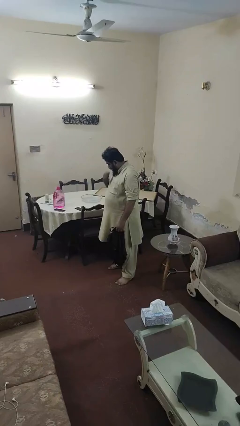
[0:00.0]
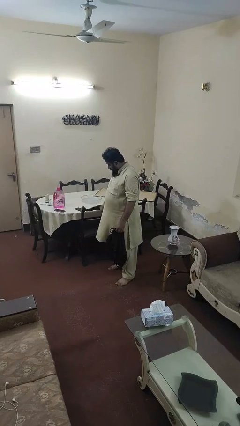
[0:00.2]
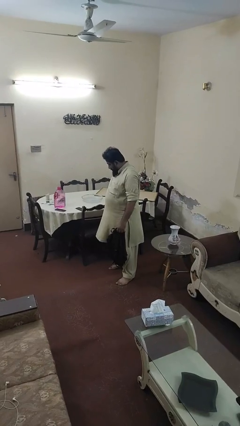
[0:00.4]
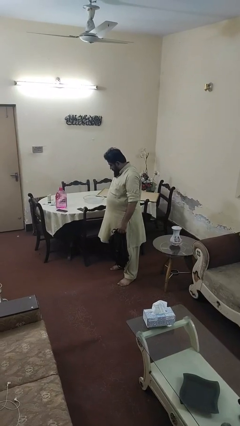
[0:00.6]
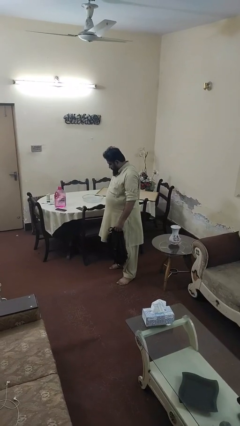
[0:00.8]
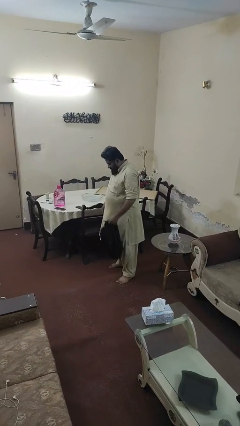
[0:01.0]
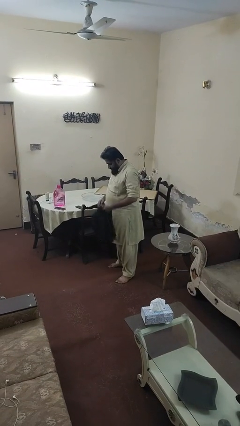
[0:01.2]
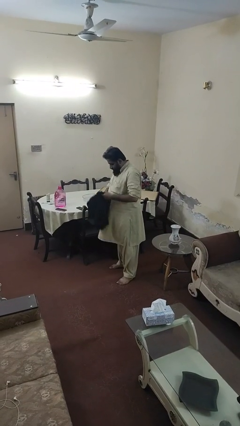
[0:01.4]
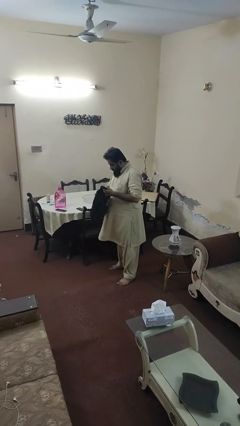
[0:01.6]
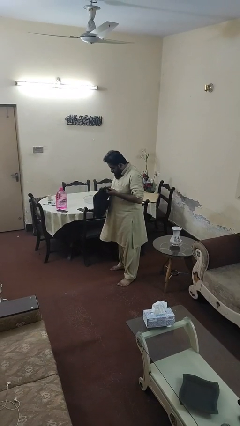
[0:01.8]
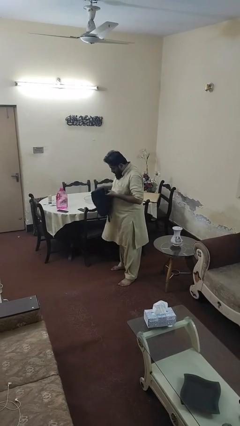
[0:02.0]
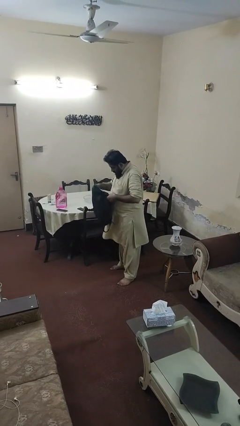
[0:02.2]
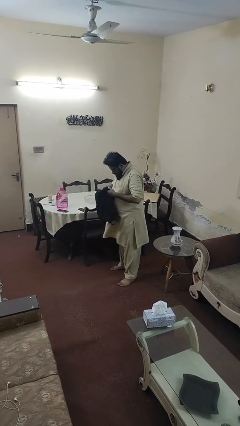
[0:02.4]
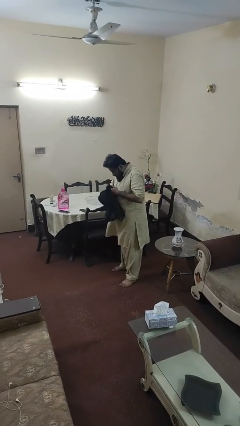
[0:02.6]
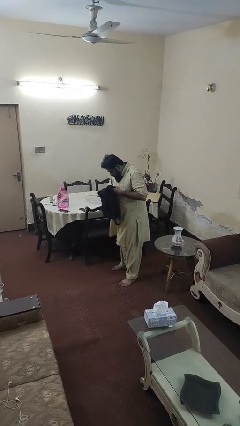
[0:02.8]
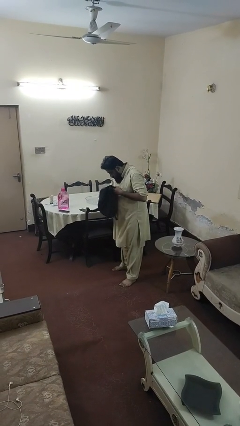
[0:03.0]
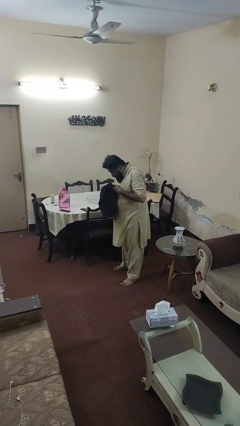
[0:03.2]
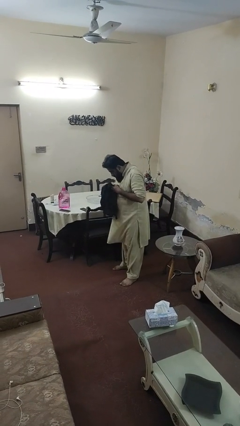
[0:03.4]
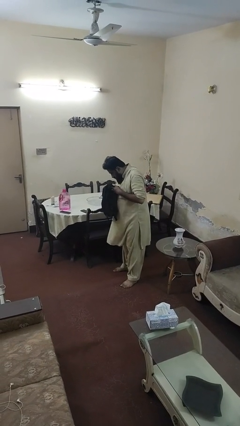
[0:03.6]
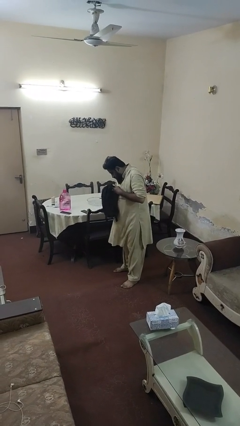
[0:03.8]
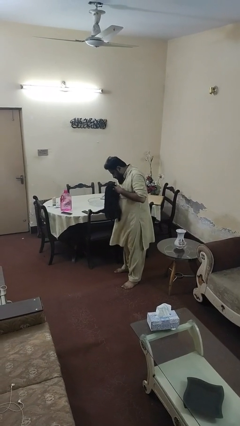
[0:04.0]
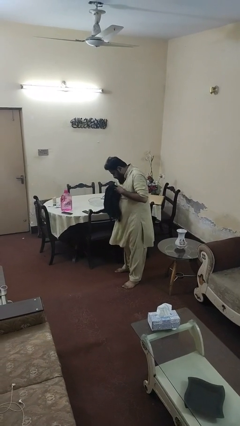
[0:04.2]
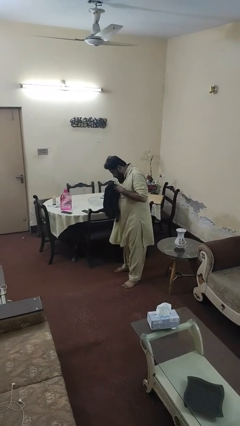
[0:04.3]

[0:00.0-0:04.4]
person searches in backpack

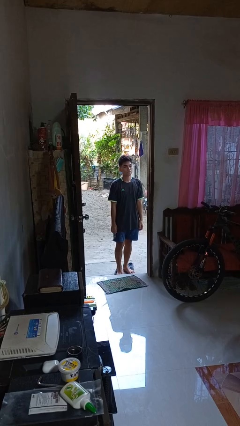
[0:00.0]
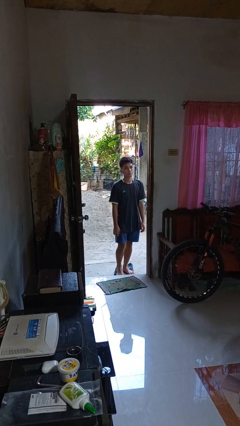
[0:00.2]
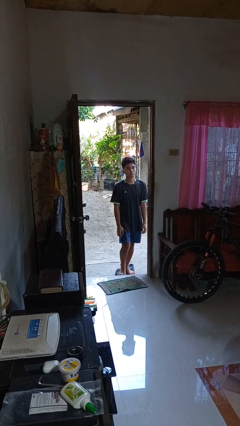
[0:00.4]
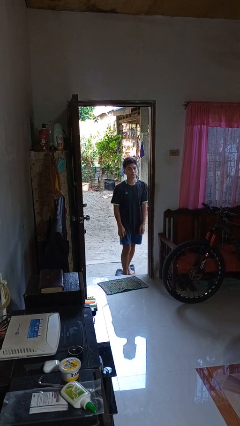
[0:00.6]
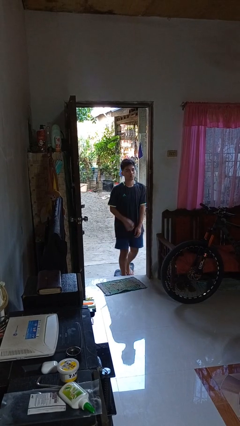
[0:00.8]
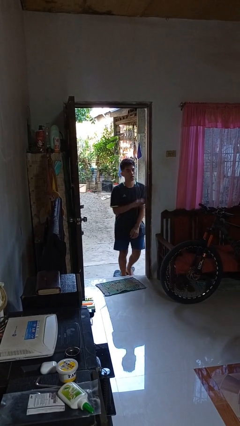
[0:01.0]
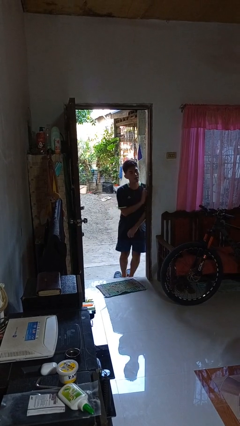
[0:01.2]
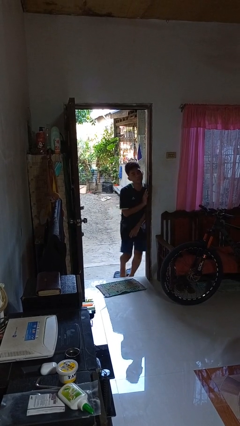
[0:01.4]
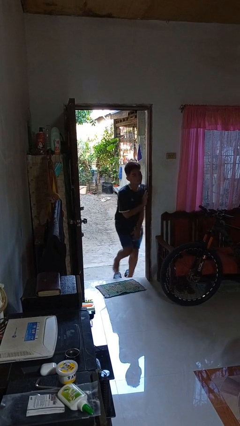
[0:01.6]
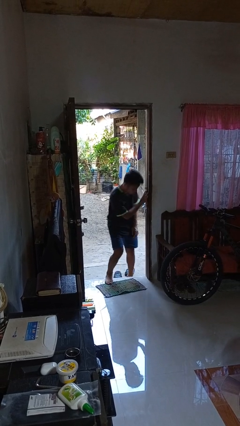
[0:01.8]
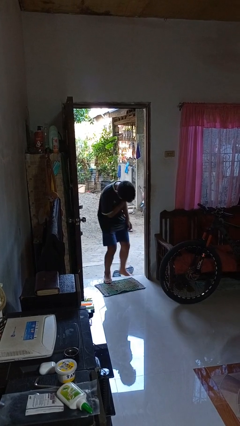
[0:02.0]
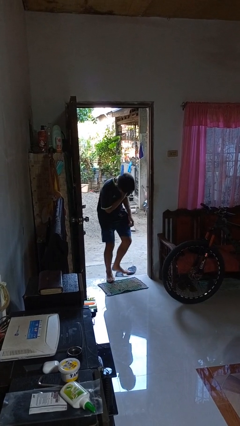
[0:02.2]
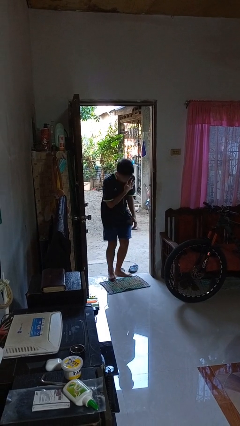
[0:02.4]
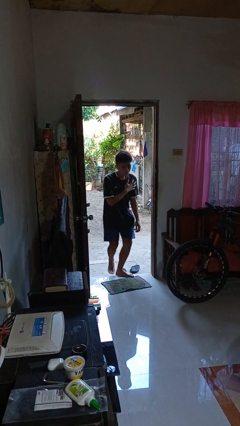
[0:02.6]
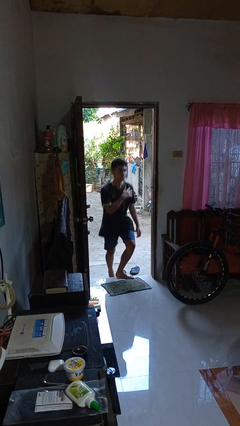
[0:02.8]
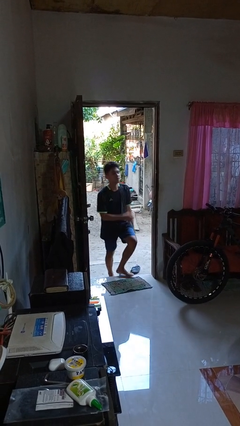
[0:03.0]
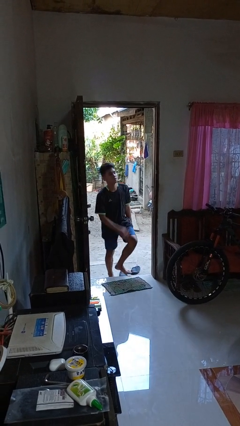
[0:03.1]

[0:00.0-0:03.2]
person bumps into wall

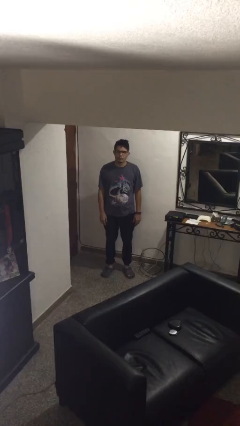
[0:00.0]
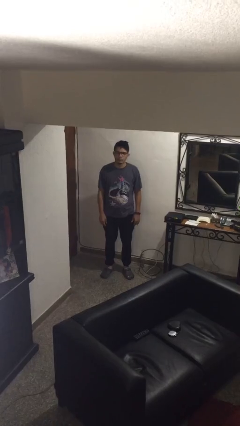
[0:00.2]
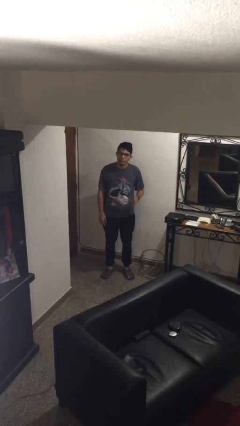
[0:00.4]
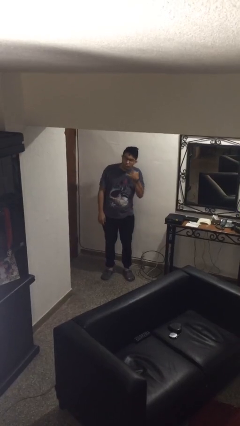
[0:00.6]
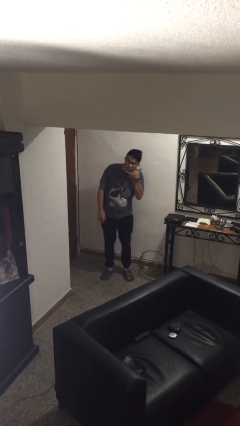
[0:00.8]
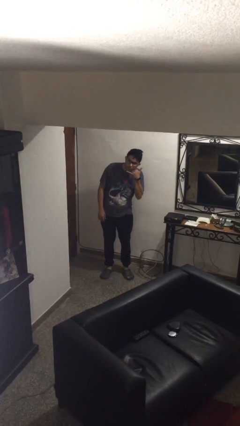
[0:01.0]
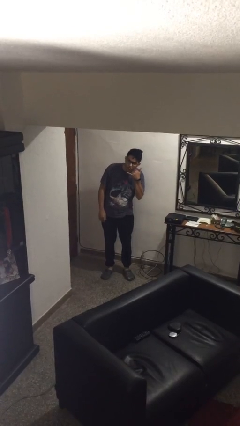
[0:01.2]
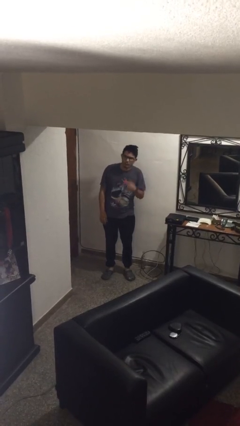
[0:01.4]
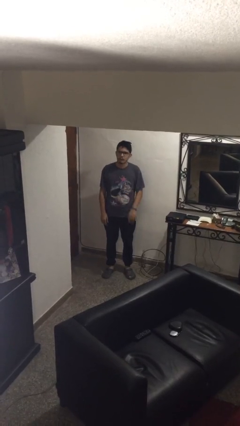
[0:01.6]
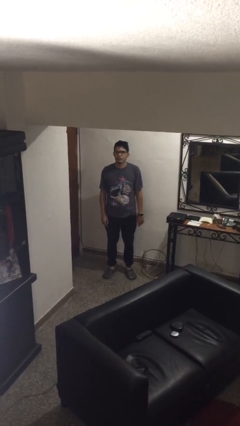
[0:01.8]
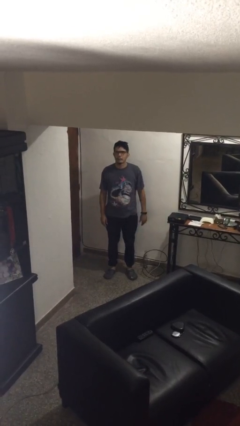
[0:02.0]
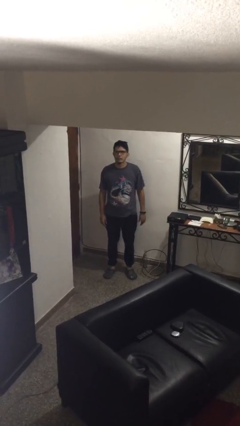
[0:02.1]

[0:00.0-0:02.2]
person gestures call me

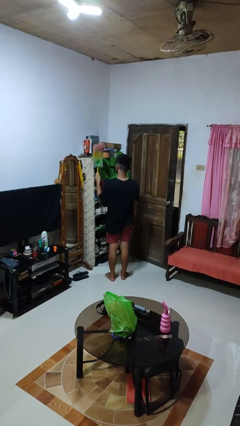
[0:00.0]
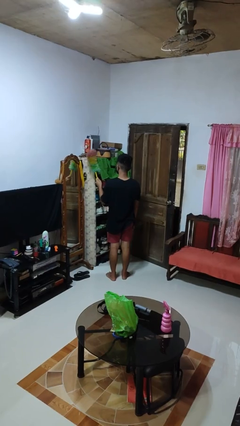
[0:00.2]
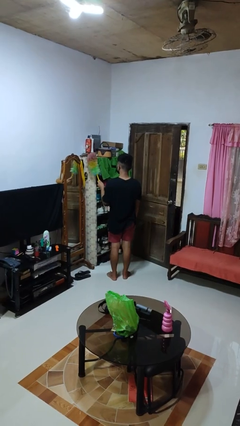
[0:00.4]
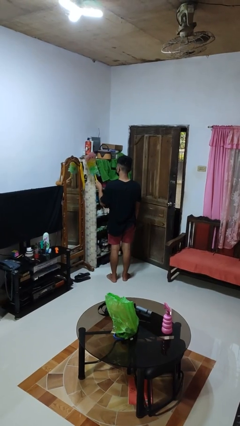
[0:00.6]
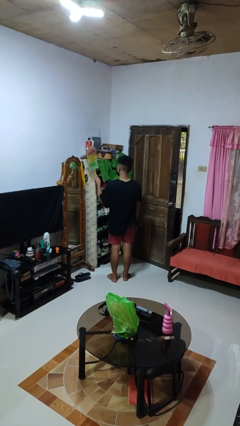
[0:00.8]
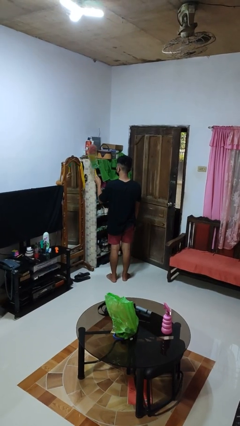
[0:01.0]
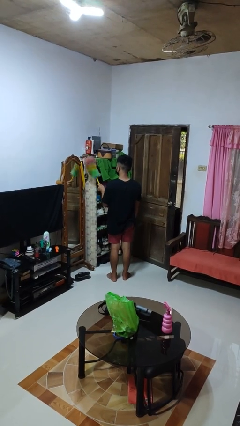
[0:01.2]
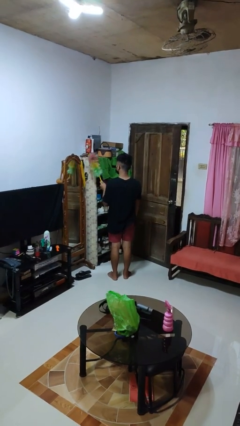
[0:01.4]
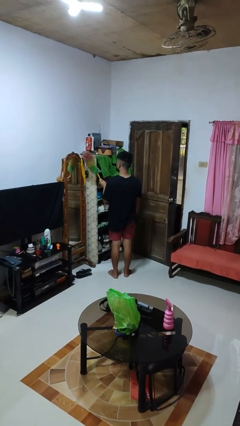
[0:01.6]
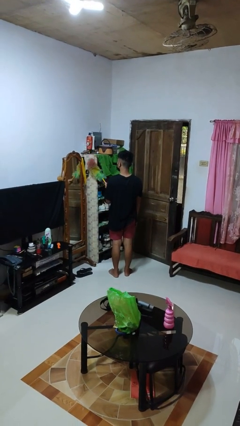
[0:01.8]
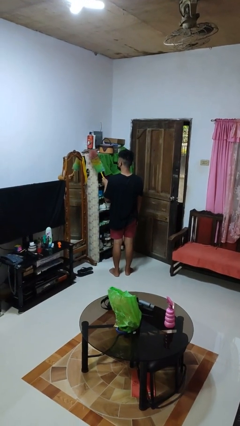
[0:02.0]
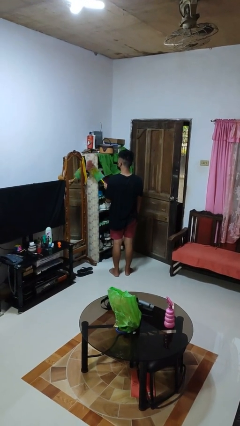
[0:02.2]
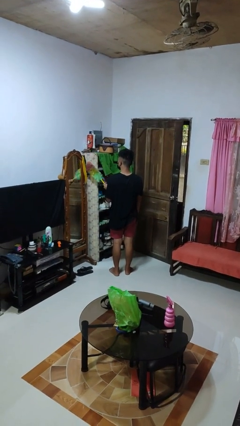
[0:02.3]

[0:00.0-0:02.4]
person dusts furniture

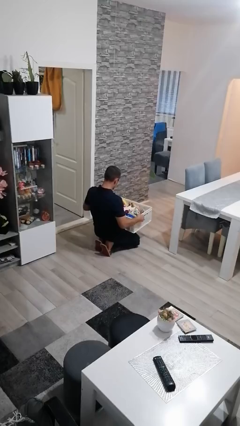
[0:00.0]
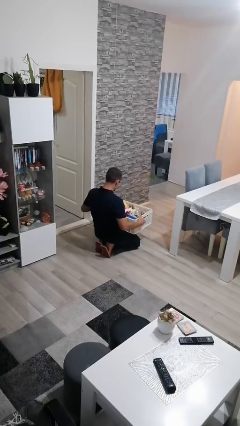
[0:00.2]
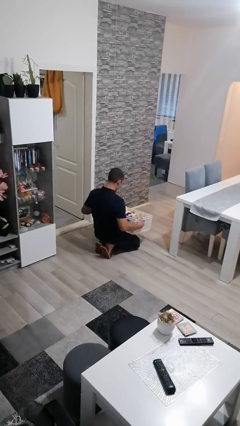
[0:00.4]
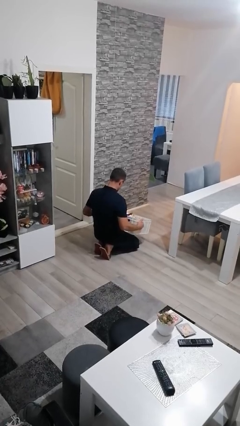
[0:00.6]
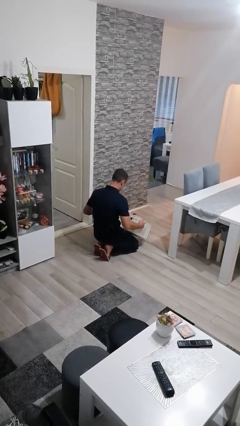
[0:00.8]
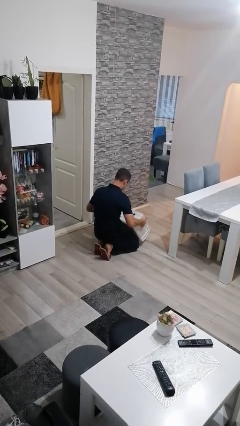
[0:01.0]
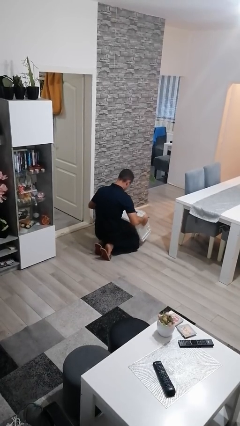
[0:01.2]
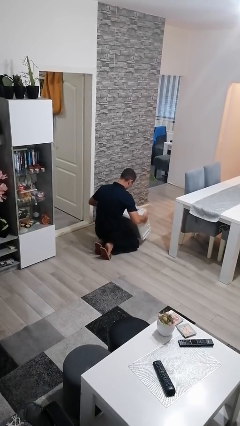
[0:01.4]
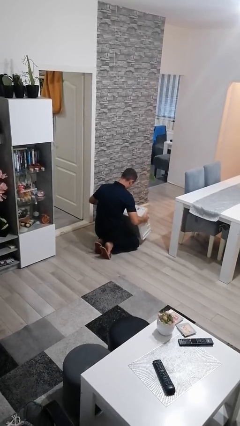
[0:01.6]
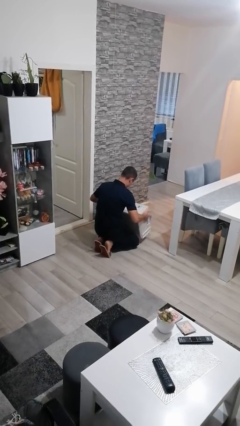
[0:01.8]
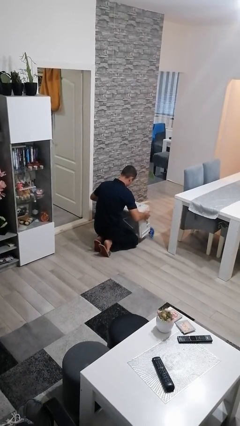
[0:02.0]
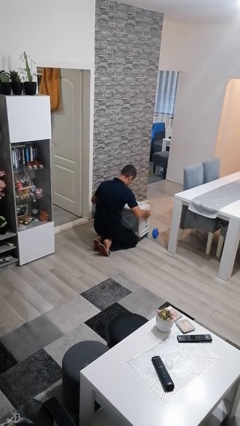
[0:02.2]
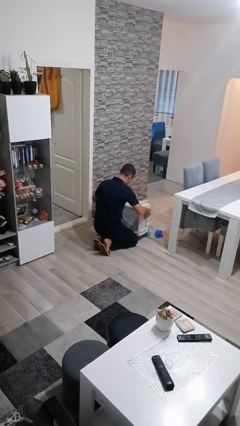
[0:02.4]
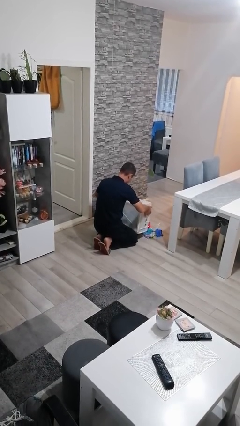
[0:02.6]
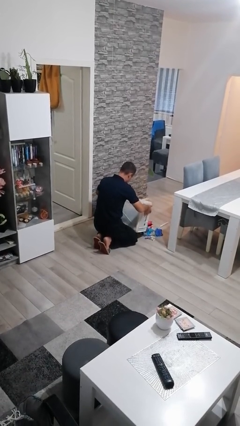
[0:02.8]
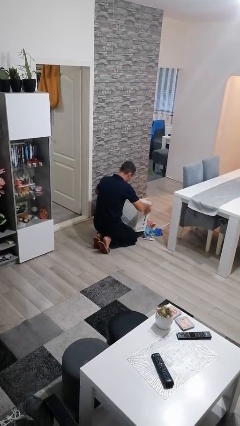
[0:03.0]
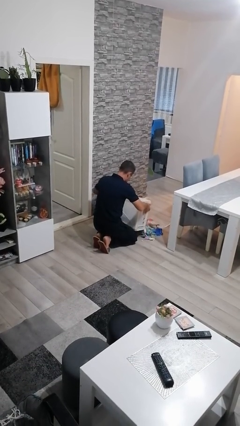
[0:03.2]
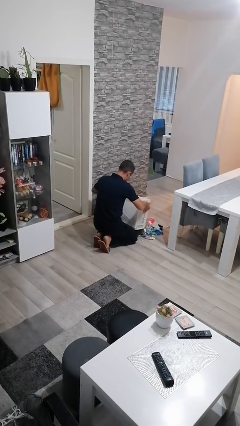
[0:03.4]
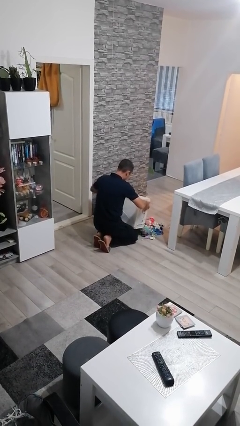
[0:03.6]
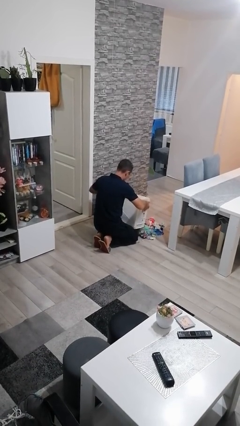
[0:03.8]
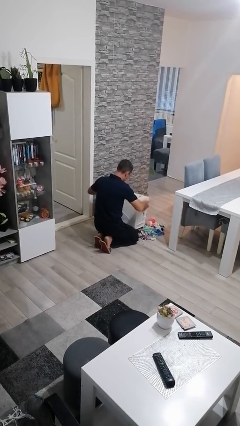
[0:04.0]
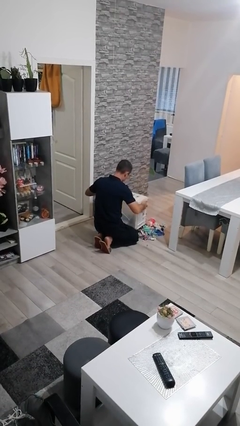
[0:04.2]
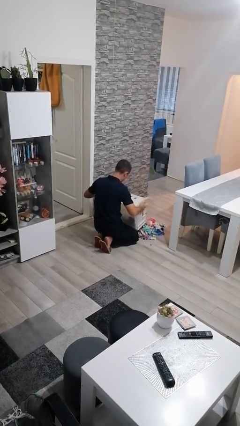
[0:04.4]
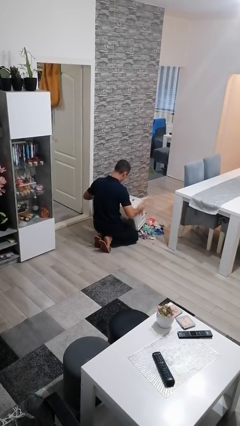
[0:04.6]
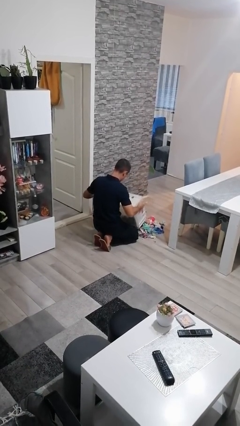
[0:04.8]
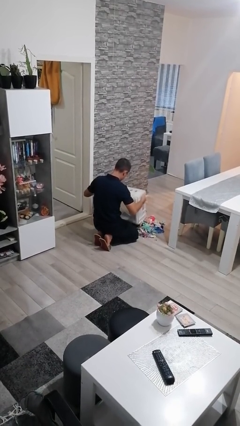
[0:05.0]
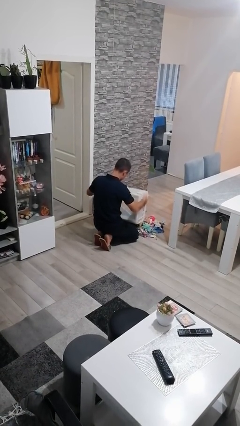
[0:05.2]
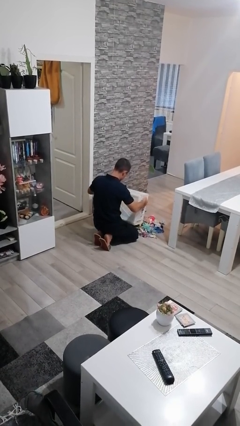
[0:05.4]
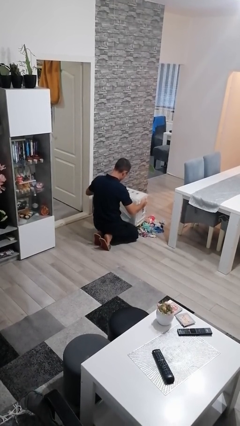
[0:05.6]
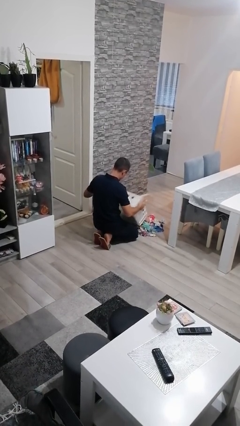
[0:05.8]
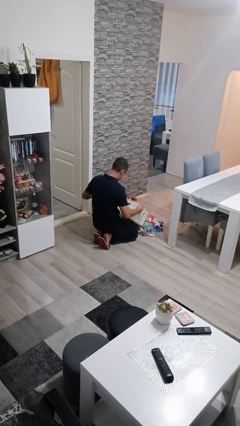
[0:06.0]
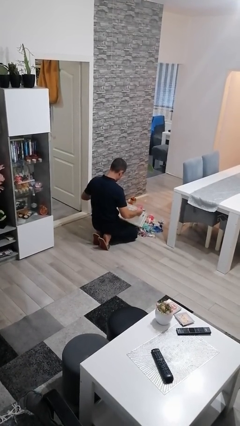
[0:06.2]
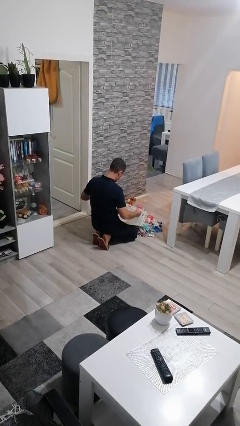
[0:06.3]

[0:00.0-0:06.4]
person unloads box onto floor
